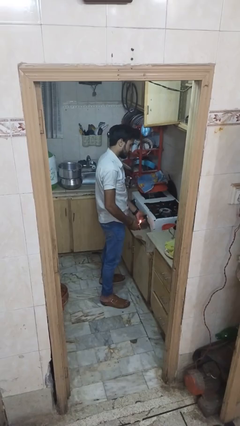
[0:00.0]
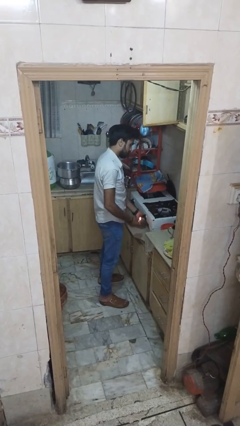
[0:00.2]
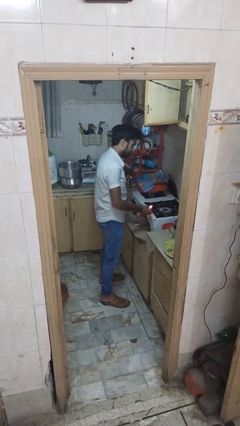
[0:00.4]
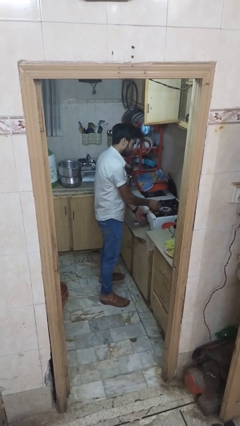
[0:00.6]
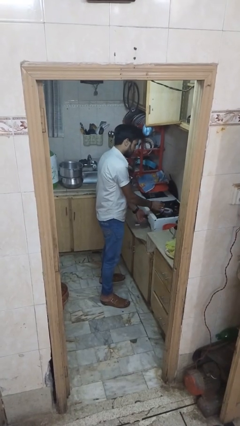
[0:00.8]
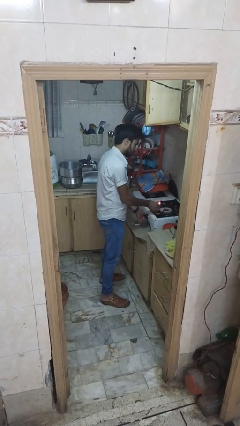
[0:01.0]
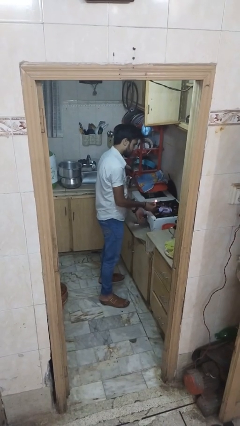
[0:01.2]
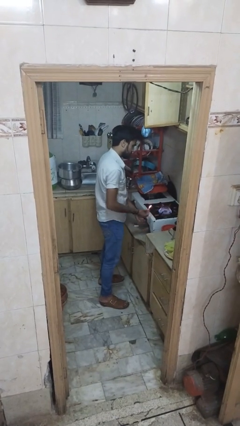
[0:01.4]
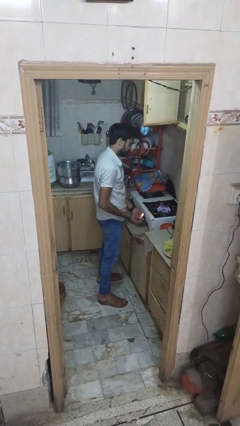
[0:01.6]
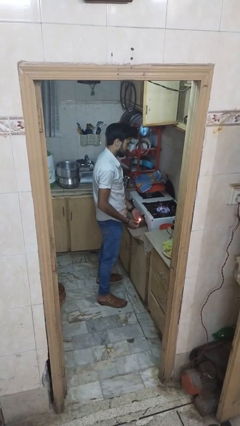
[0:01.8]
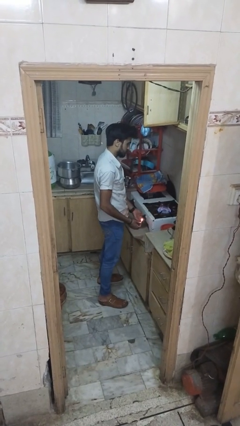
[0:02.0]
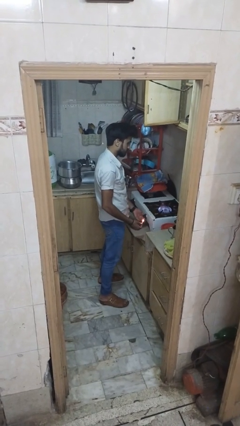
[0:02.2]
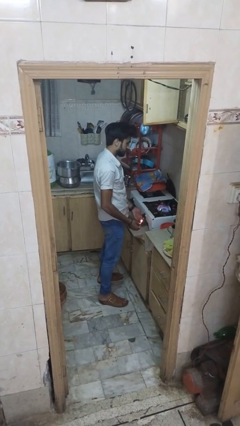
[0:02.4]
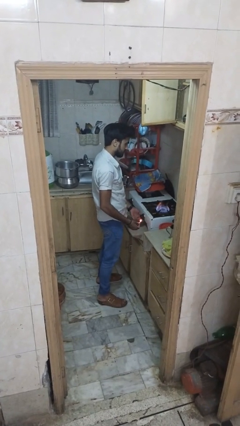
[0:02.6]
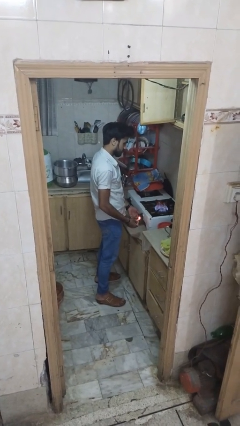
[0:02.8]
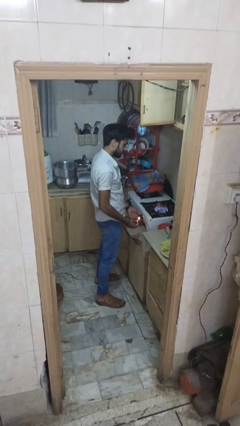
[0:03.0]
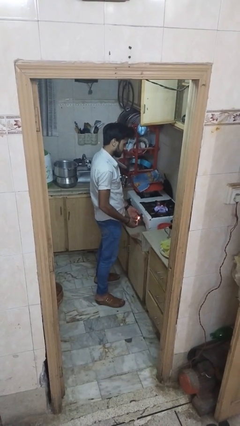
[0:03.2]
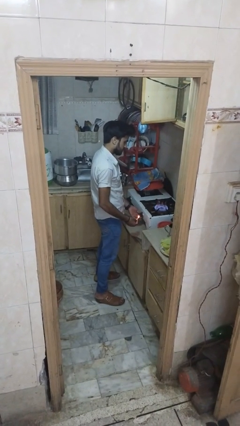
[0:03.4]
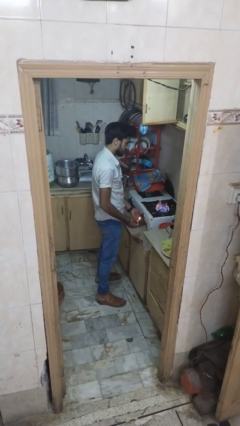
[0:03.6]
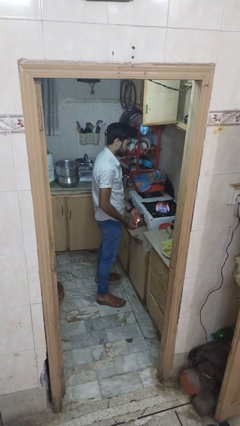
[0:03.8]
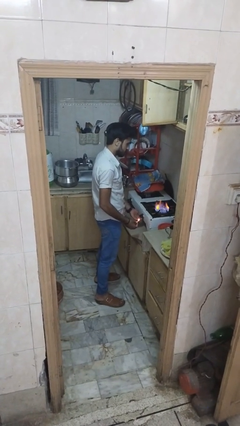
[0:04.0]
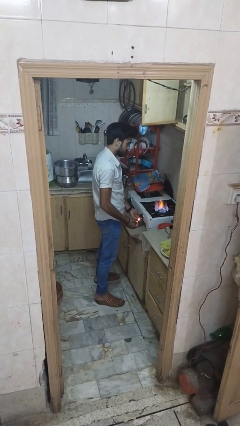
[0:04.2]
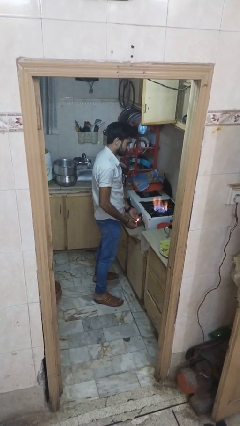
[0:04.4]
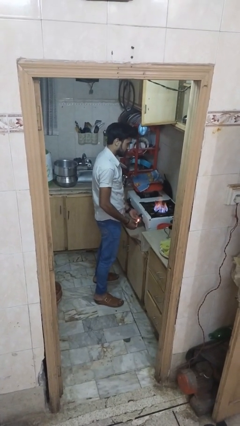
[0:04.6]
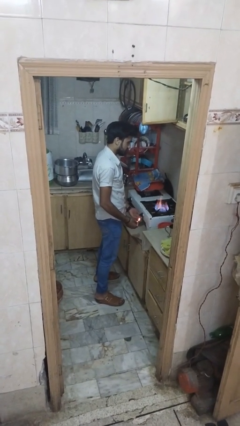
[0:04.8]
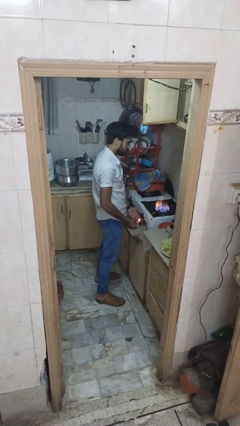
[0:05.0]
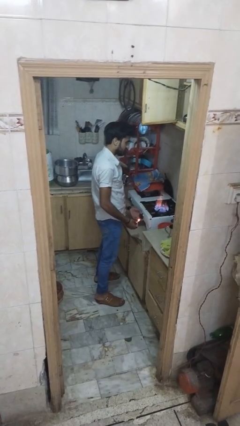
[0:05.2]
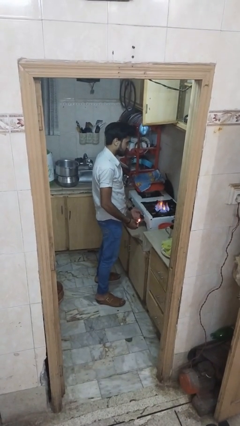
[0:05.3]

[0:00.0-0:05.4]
person turns on stovetop

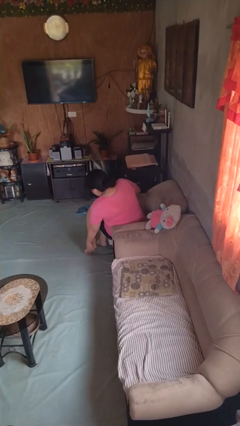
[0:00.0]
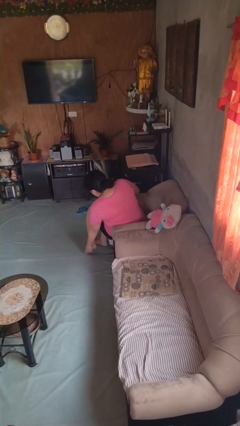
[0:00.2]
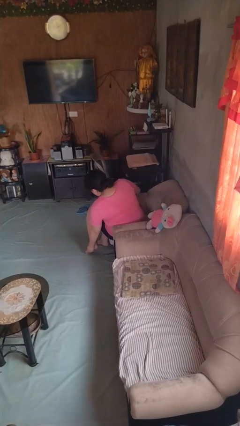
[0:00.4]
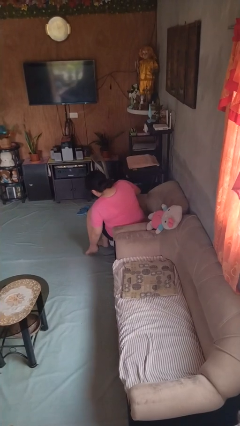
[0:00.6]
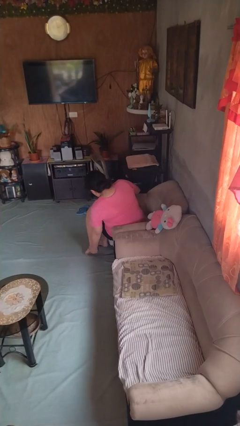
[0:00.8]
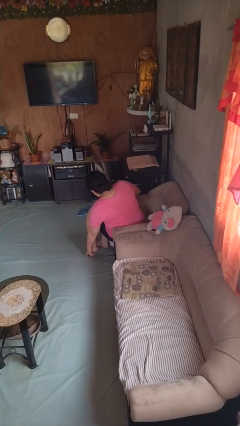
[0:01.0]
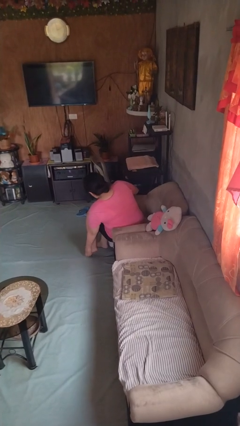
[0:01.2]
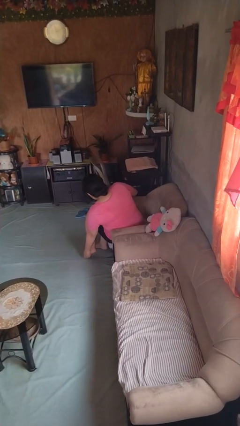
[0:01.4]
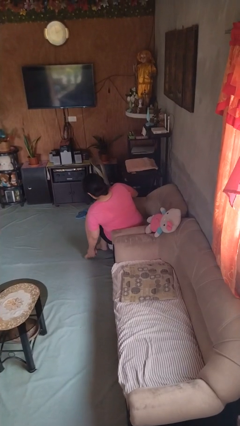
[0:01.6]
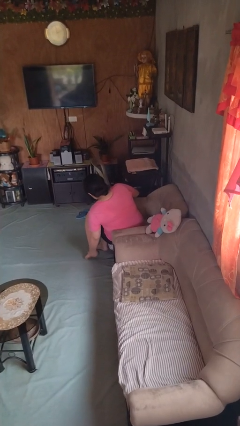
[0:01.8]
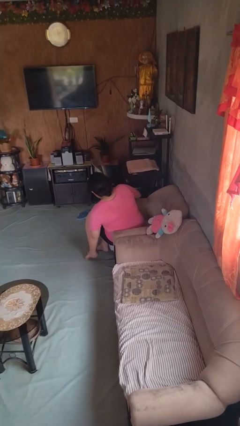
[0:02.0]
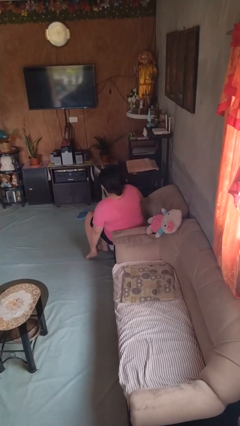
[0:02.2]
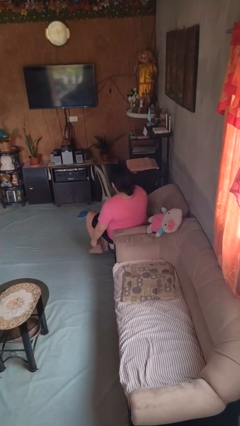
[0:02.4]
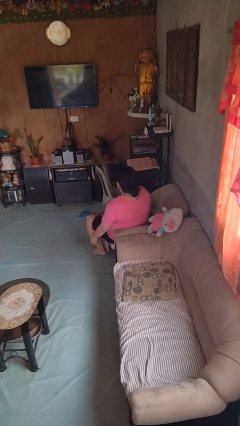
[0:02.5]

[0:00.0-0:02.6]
person rubs foot

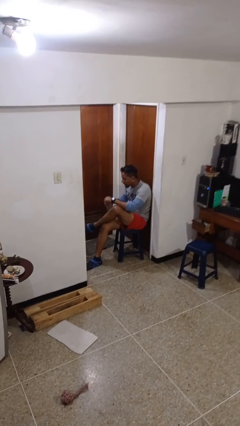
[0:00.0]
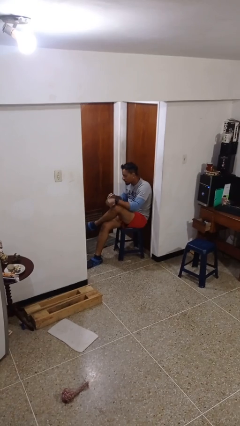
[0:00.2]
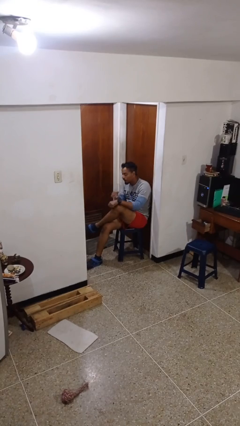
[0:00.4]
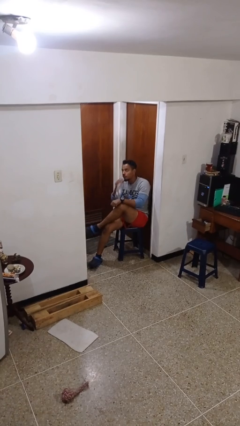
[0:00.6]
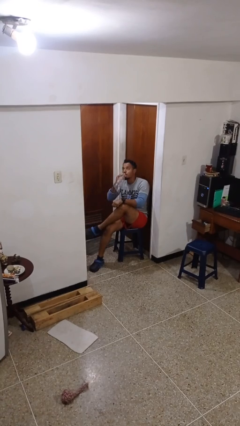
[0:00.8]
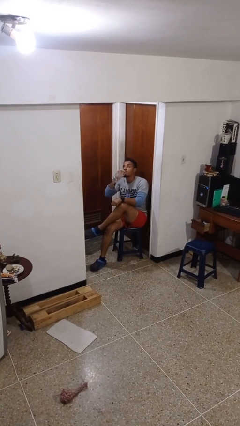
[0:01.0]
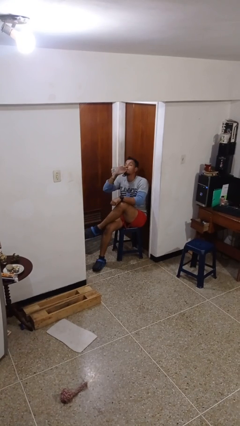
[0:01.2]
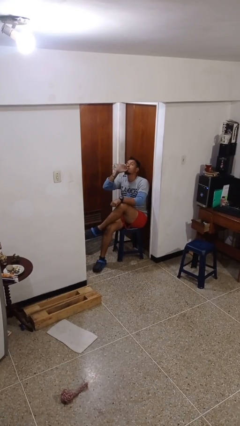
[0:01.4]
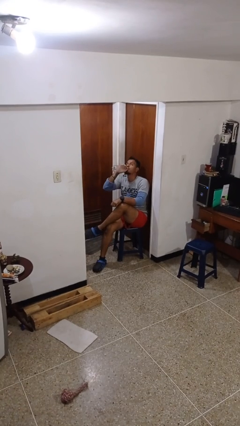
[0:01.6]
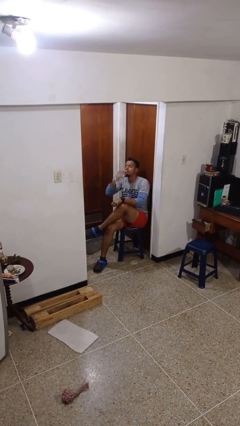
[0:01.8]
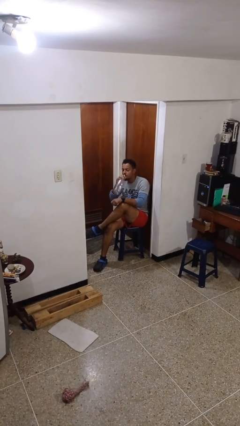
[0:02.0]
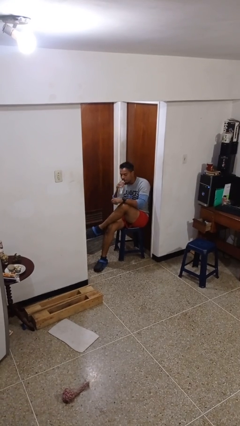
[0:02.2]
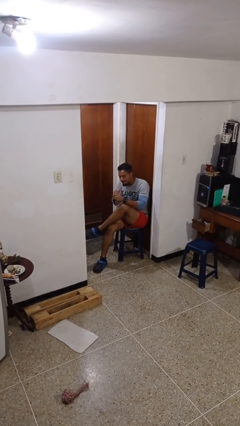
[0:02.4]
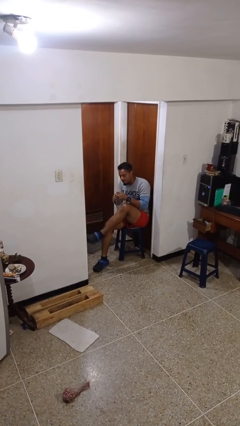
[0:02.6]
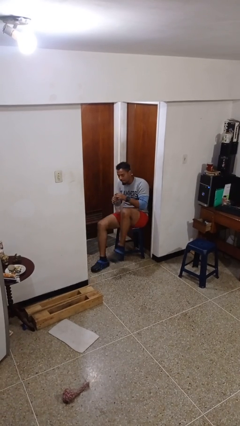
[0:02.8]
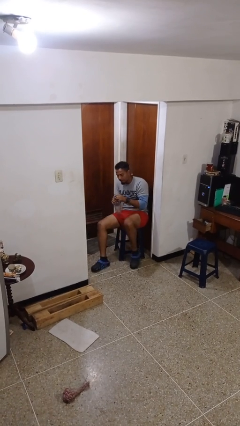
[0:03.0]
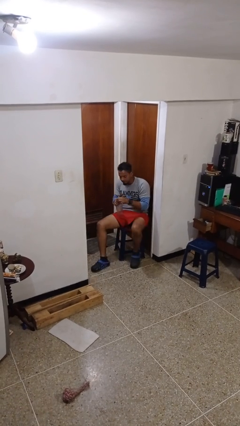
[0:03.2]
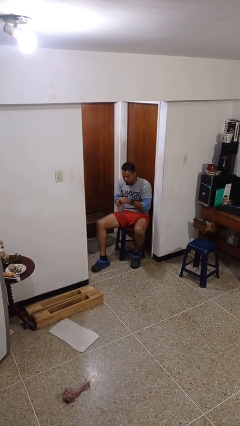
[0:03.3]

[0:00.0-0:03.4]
person drinks from bottle

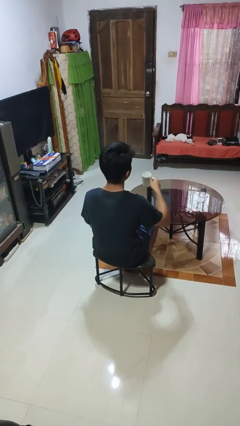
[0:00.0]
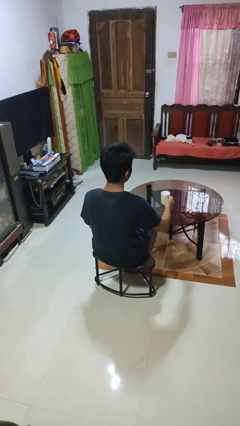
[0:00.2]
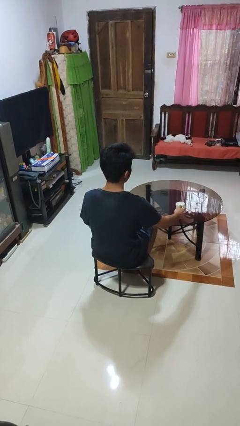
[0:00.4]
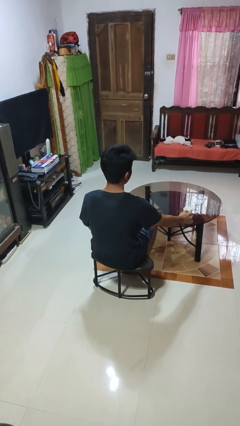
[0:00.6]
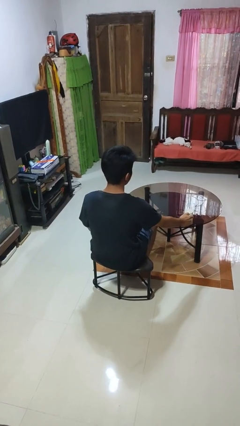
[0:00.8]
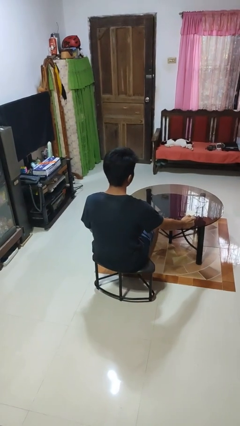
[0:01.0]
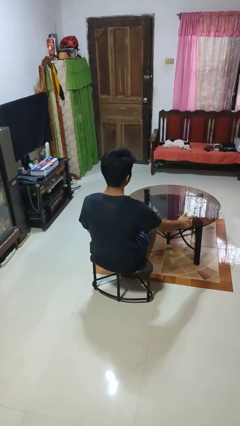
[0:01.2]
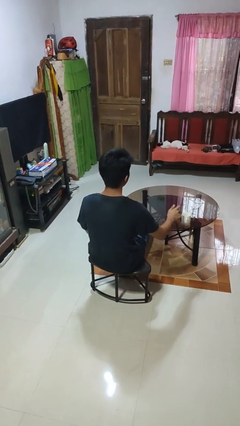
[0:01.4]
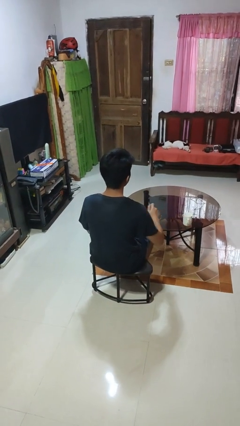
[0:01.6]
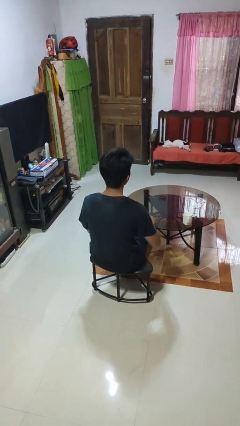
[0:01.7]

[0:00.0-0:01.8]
person puts down object on table

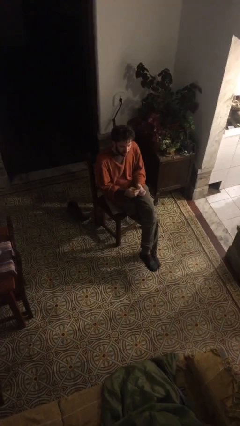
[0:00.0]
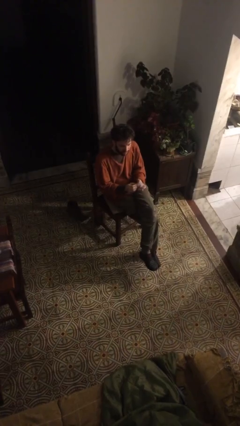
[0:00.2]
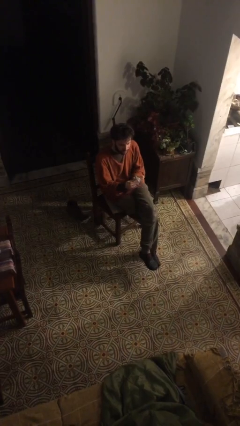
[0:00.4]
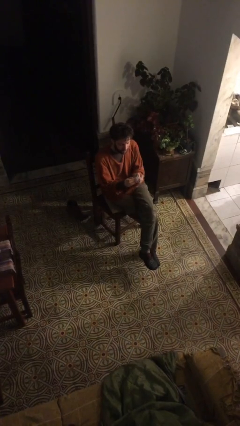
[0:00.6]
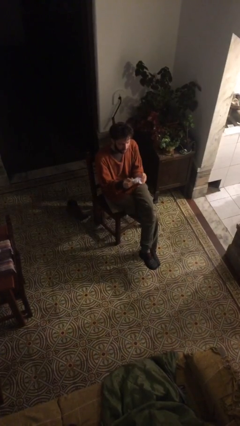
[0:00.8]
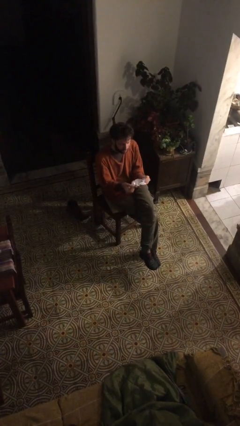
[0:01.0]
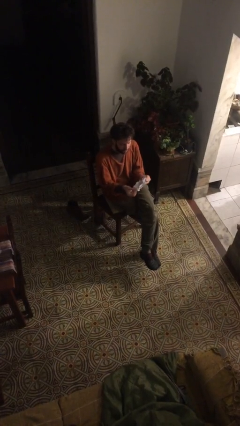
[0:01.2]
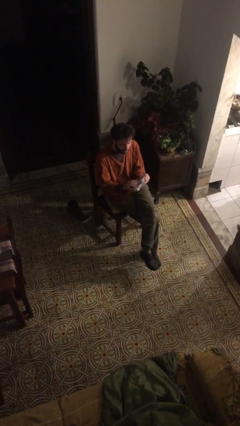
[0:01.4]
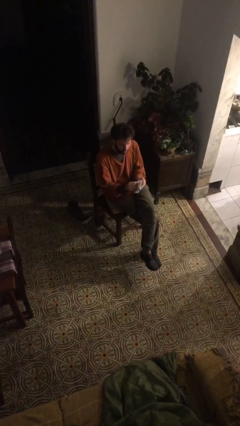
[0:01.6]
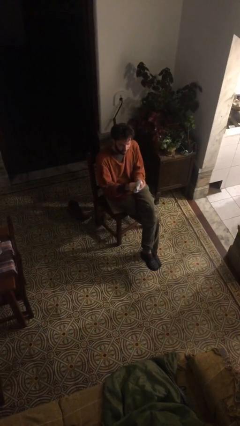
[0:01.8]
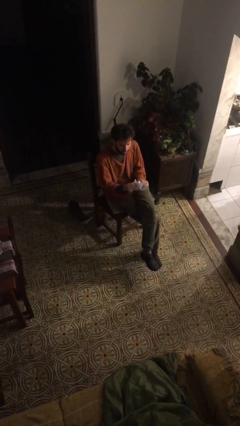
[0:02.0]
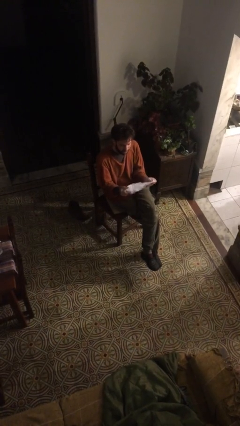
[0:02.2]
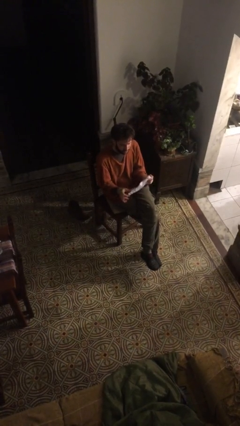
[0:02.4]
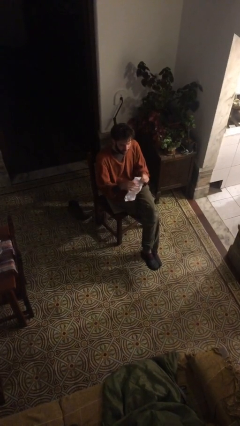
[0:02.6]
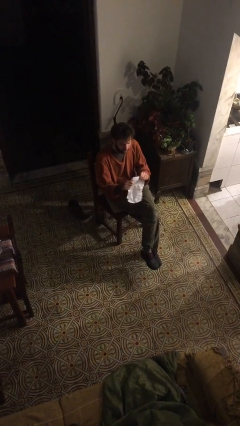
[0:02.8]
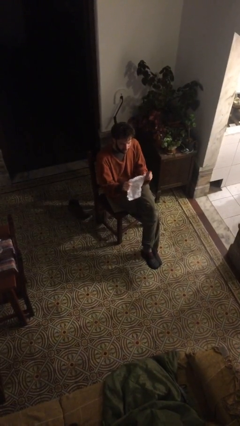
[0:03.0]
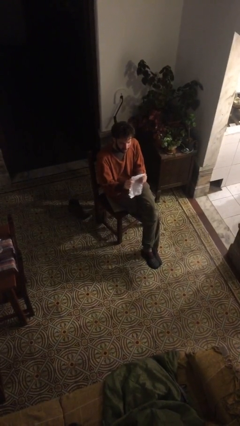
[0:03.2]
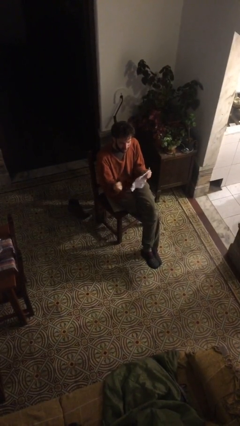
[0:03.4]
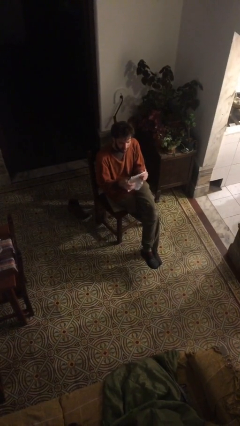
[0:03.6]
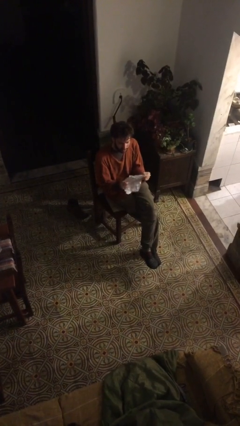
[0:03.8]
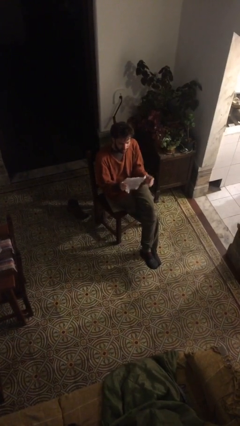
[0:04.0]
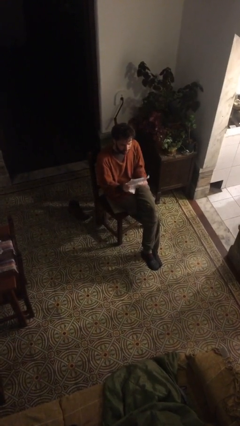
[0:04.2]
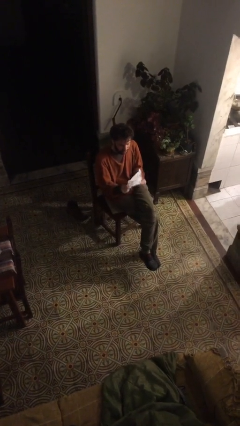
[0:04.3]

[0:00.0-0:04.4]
person crumples paper
